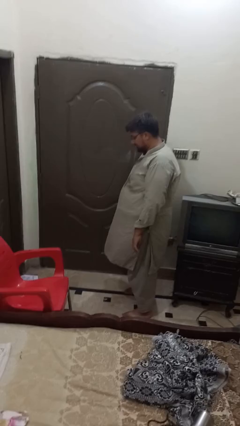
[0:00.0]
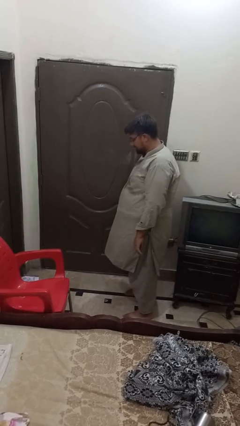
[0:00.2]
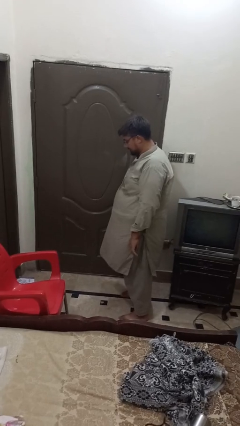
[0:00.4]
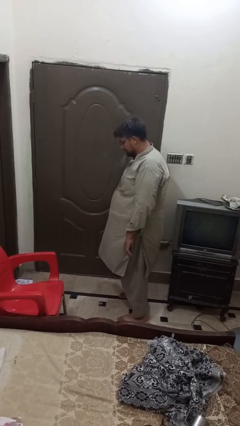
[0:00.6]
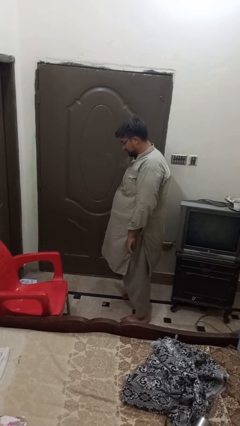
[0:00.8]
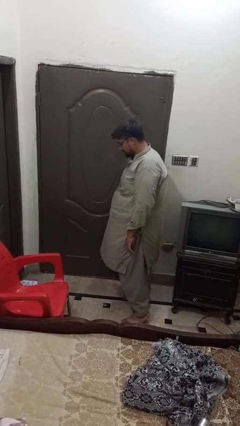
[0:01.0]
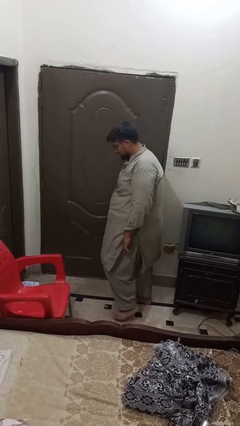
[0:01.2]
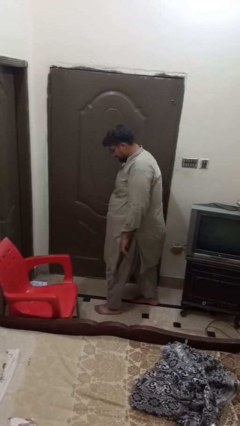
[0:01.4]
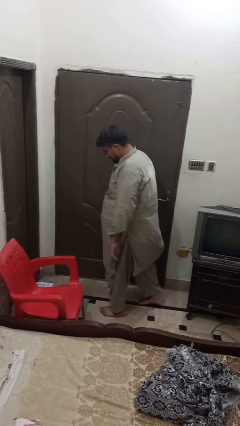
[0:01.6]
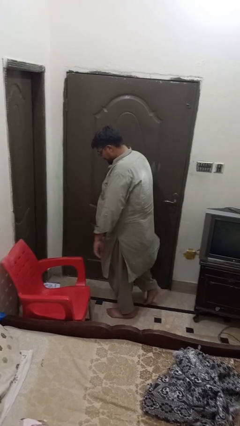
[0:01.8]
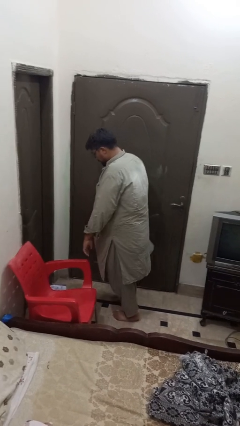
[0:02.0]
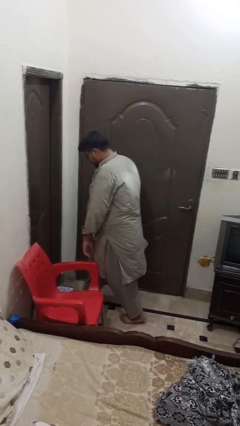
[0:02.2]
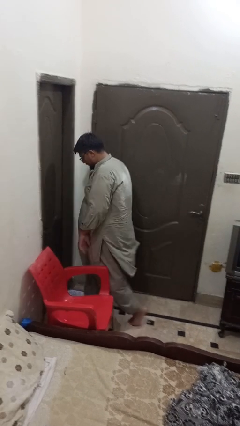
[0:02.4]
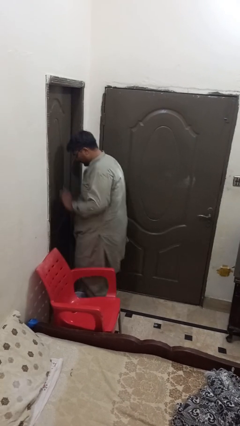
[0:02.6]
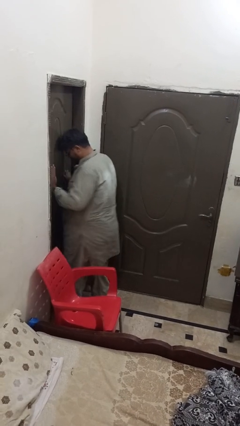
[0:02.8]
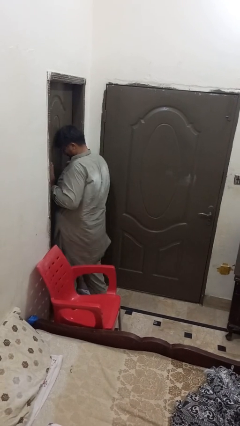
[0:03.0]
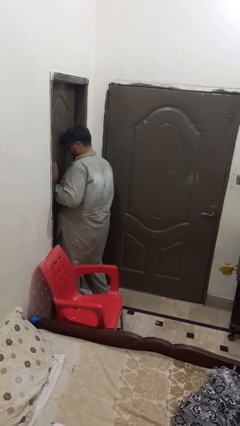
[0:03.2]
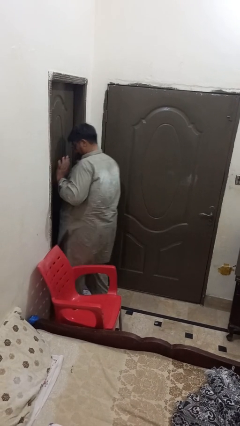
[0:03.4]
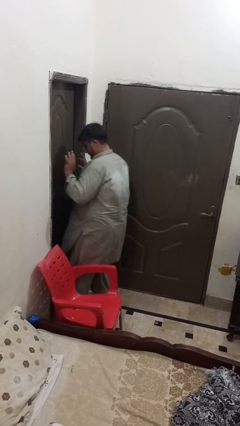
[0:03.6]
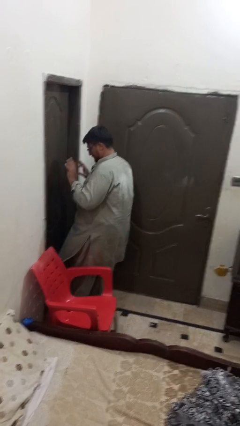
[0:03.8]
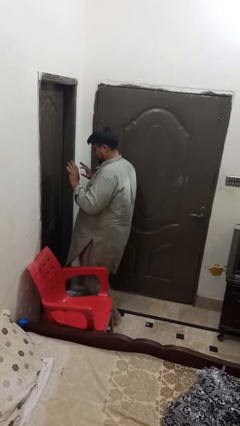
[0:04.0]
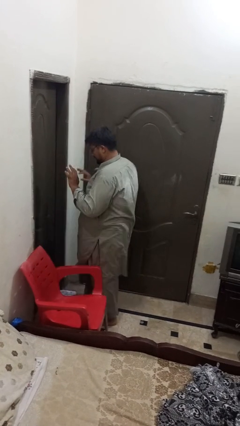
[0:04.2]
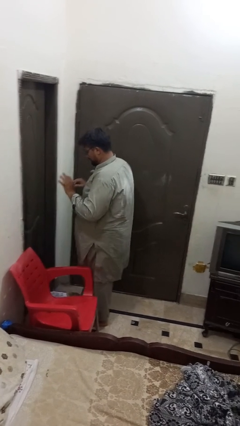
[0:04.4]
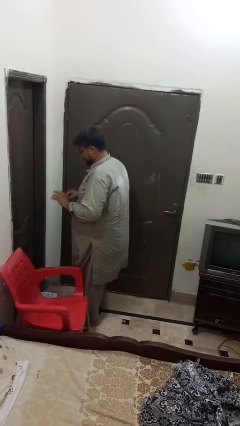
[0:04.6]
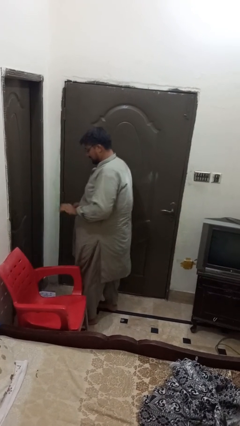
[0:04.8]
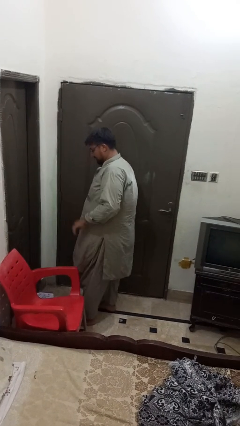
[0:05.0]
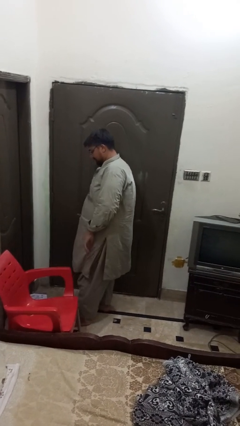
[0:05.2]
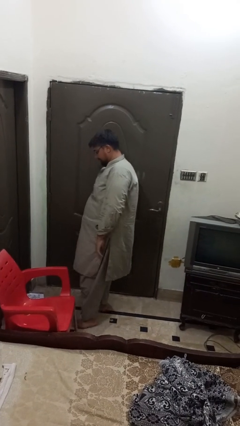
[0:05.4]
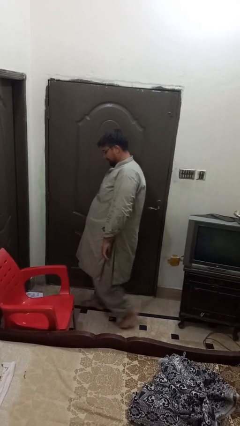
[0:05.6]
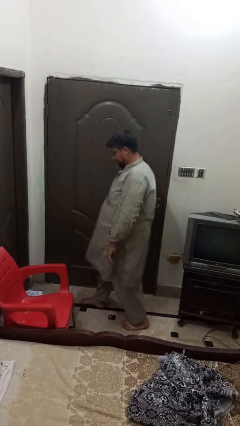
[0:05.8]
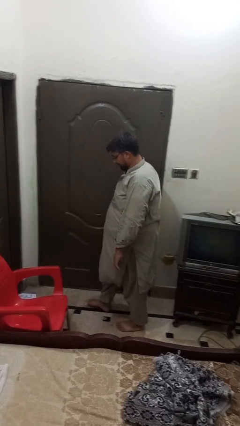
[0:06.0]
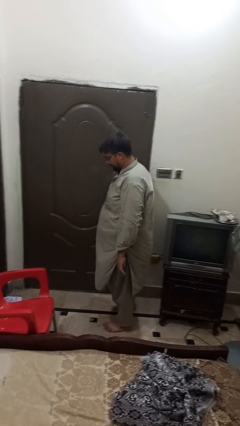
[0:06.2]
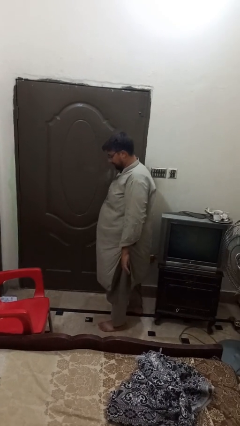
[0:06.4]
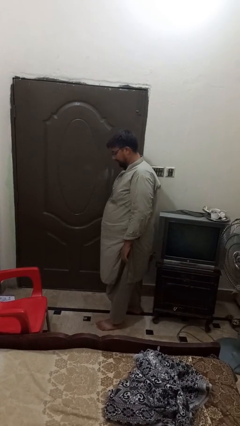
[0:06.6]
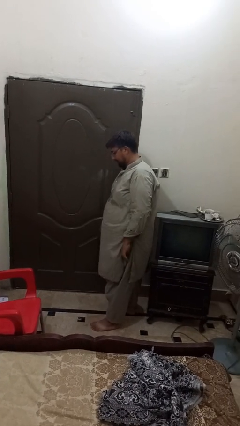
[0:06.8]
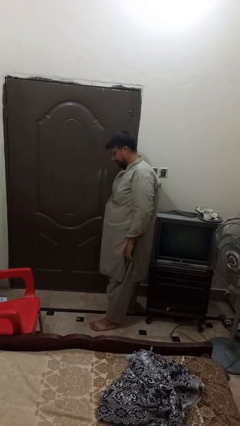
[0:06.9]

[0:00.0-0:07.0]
person bumps into wall

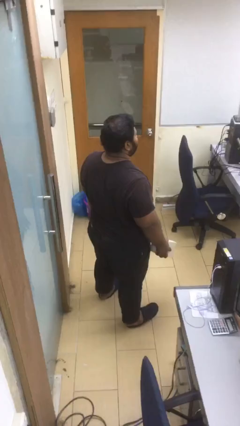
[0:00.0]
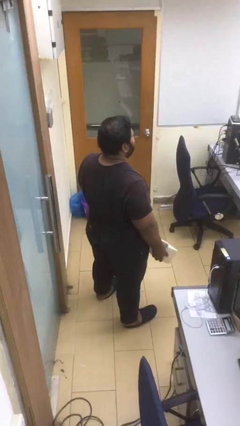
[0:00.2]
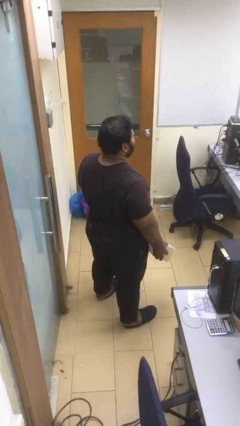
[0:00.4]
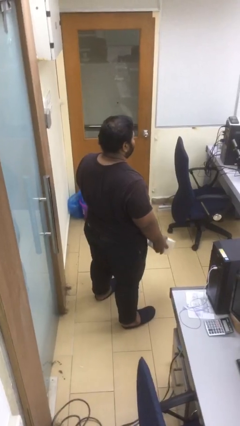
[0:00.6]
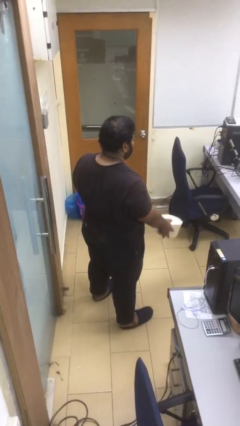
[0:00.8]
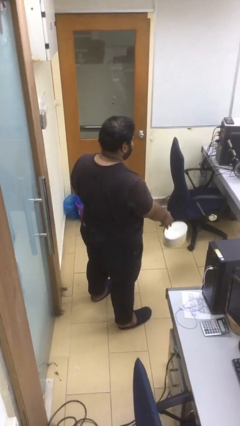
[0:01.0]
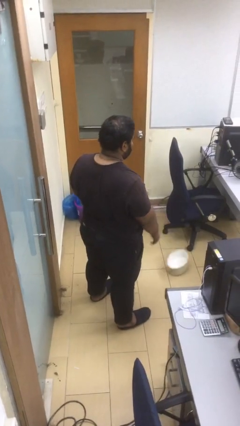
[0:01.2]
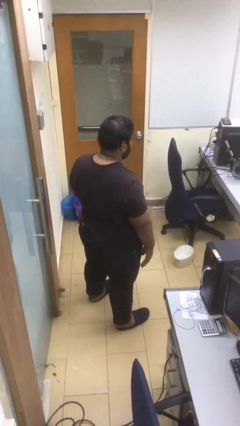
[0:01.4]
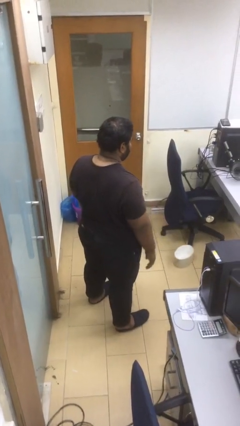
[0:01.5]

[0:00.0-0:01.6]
person throws object to ground

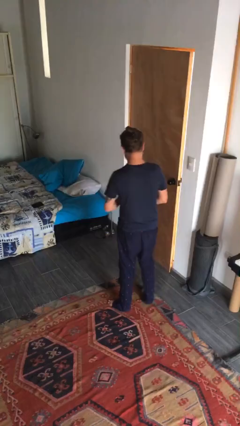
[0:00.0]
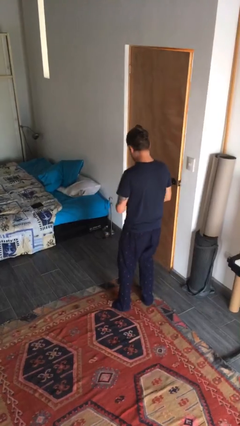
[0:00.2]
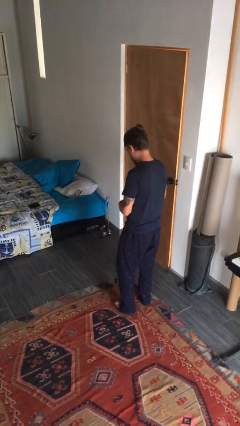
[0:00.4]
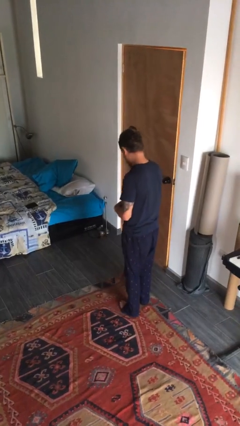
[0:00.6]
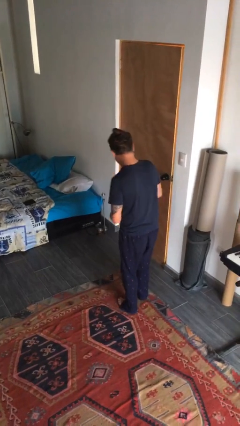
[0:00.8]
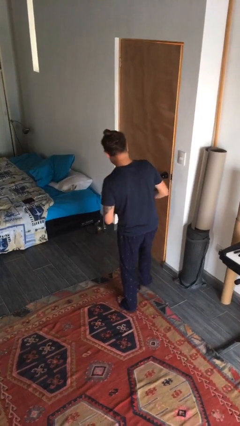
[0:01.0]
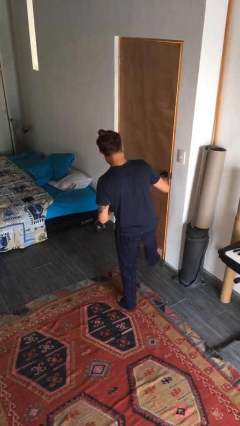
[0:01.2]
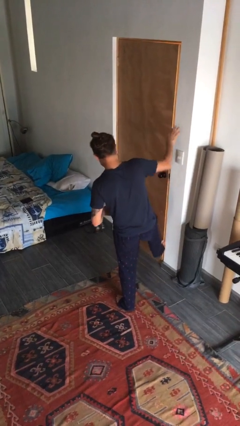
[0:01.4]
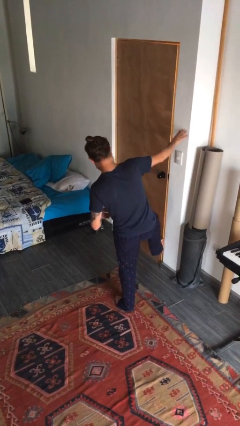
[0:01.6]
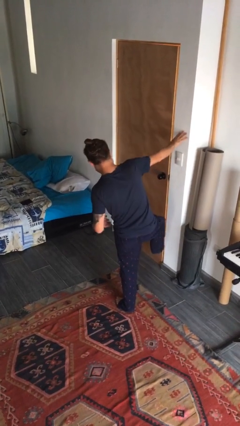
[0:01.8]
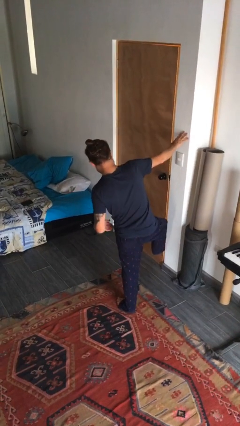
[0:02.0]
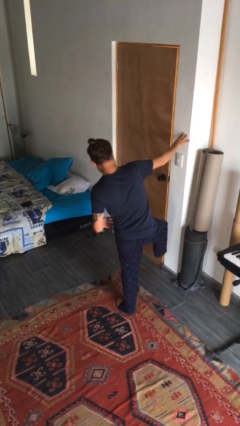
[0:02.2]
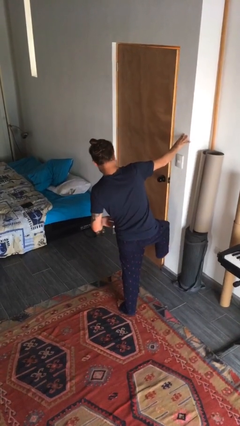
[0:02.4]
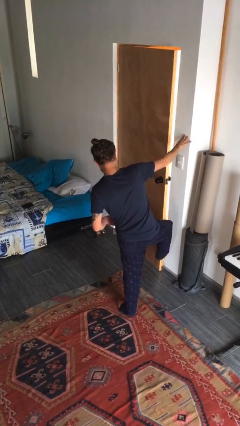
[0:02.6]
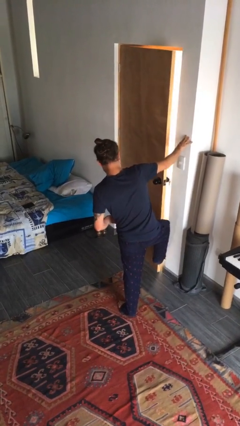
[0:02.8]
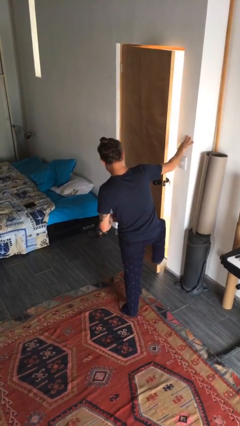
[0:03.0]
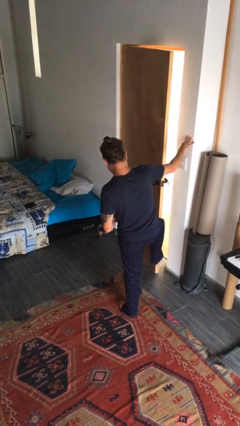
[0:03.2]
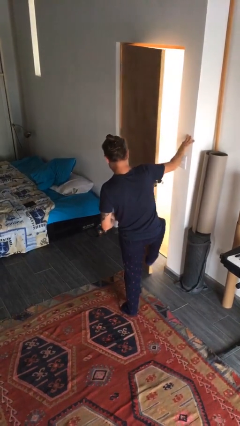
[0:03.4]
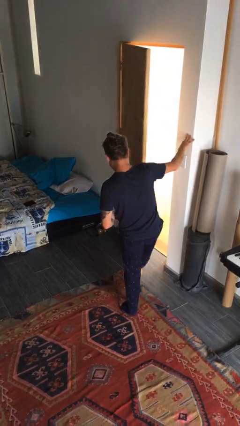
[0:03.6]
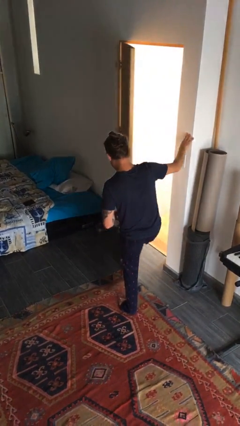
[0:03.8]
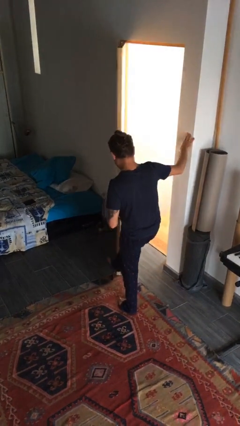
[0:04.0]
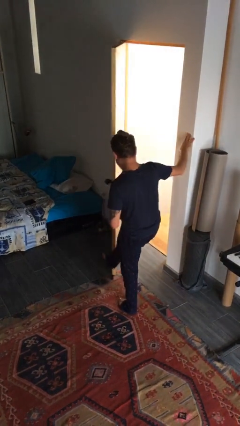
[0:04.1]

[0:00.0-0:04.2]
person opens facility door

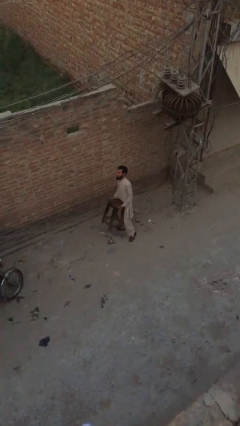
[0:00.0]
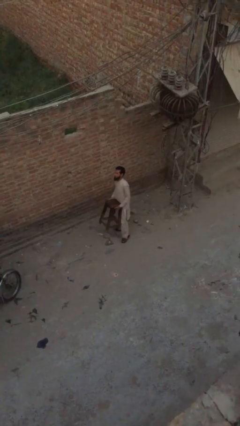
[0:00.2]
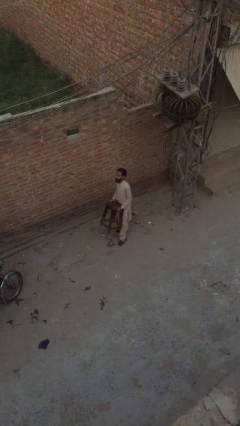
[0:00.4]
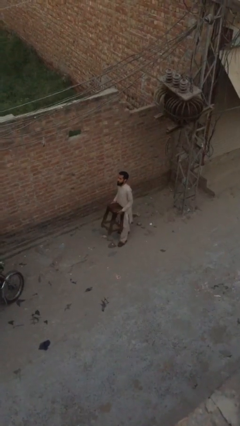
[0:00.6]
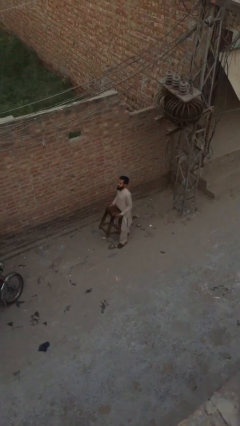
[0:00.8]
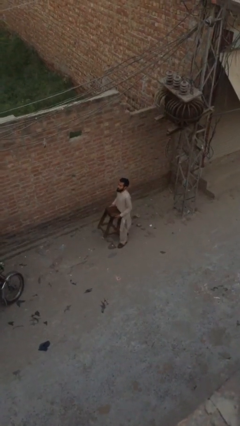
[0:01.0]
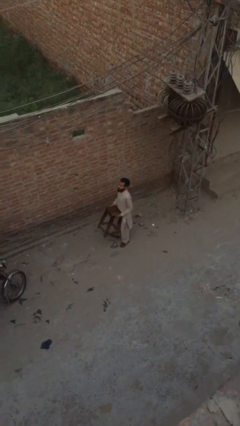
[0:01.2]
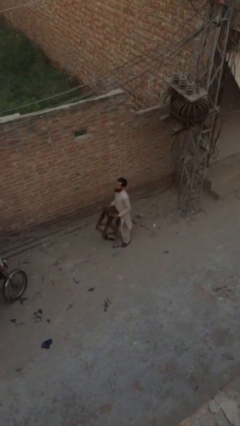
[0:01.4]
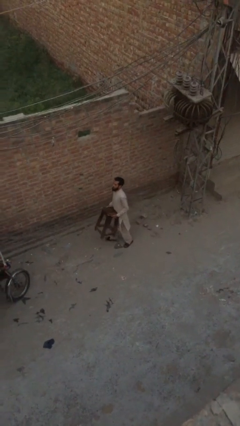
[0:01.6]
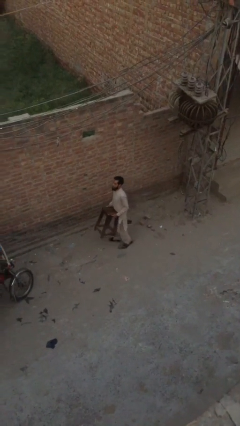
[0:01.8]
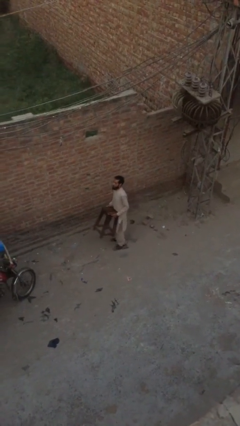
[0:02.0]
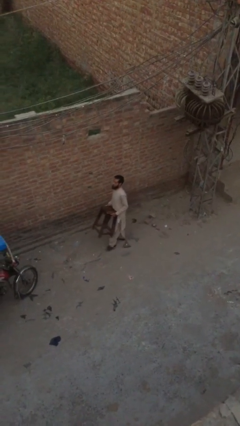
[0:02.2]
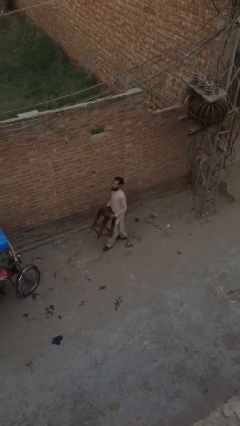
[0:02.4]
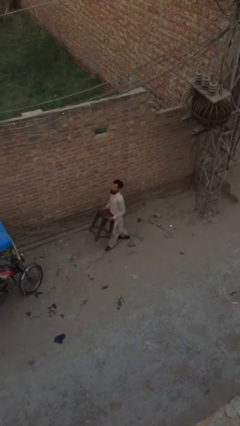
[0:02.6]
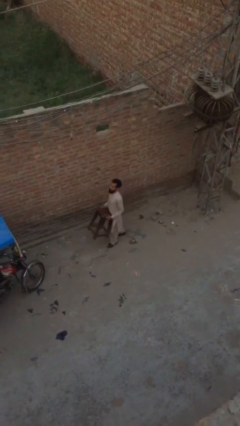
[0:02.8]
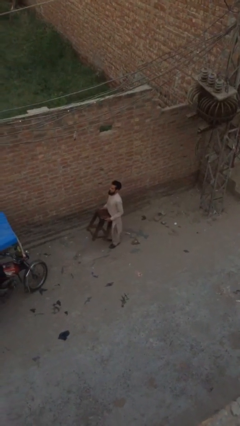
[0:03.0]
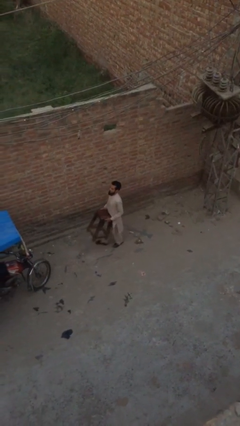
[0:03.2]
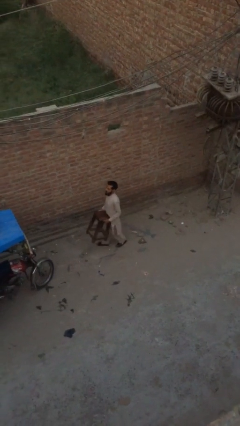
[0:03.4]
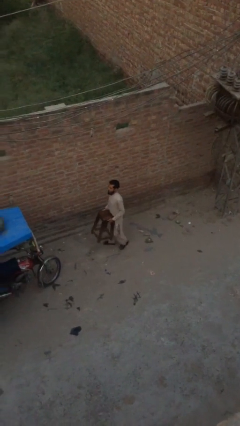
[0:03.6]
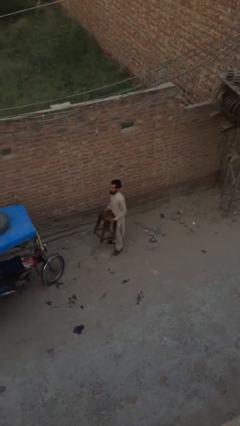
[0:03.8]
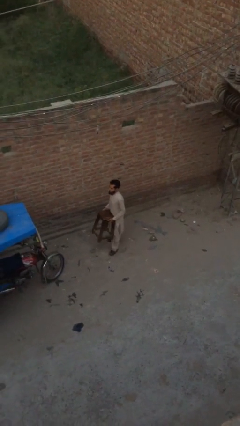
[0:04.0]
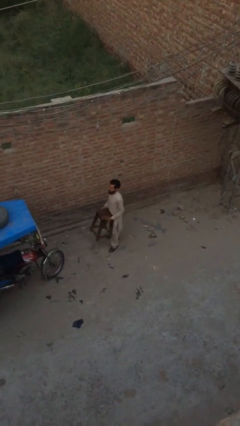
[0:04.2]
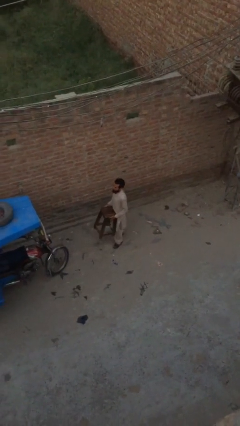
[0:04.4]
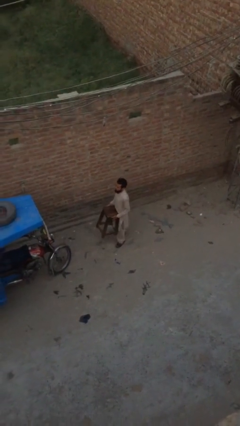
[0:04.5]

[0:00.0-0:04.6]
person carries heavy object

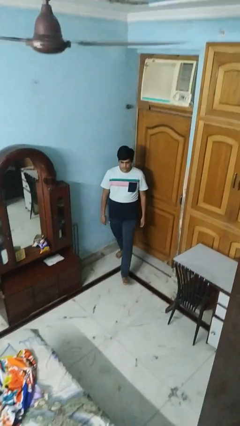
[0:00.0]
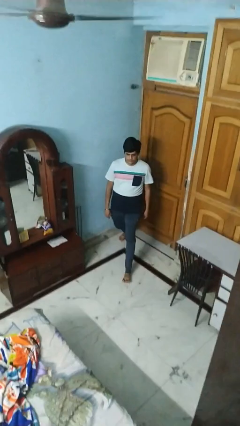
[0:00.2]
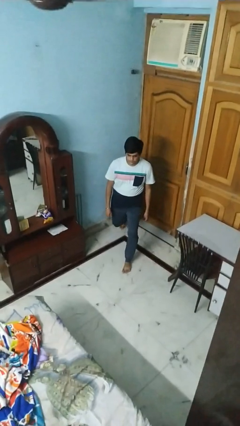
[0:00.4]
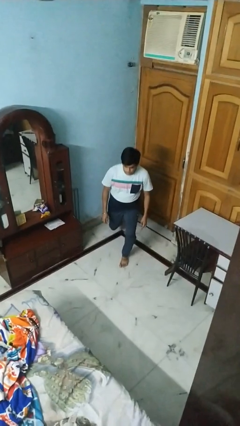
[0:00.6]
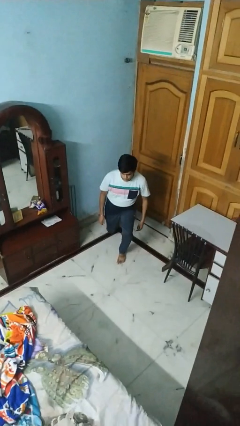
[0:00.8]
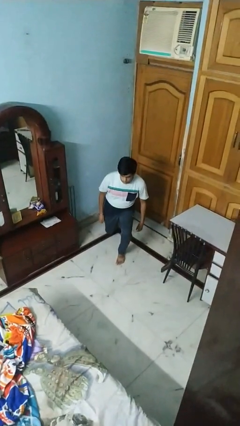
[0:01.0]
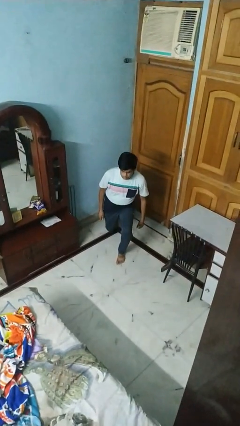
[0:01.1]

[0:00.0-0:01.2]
person exercises with lunges
